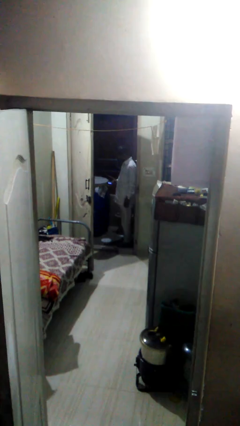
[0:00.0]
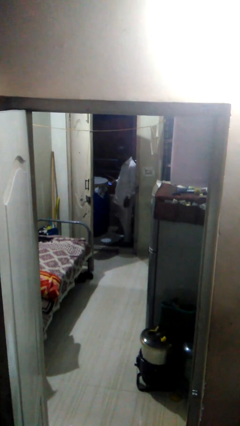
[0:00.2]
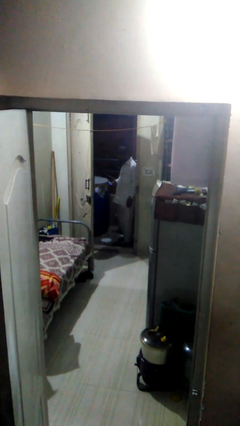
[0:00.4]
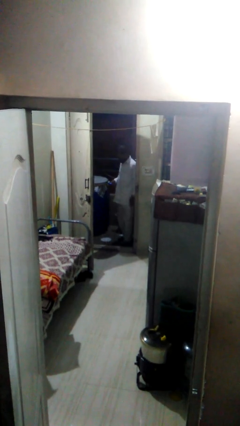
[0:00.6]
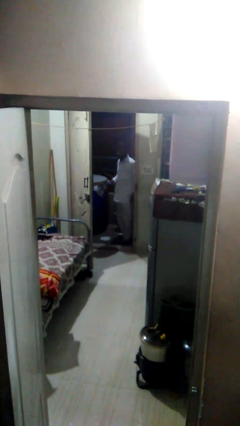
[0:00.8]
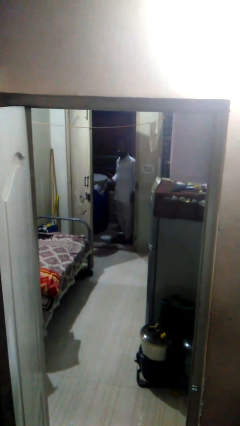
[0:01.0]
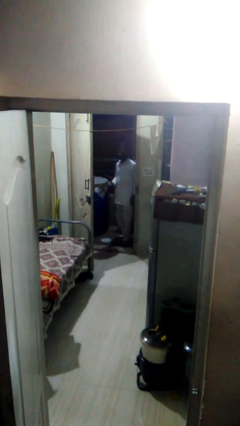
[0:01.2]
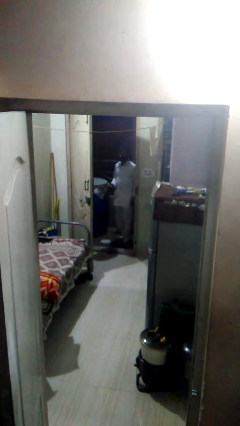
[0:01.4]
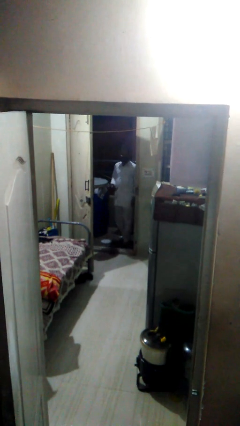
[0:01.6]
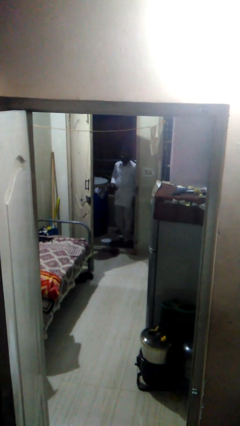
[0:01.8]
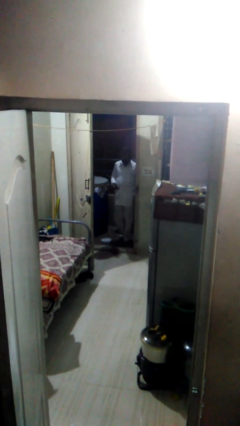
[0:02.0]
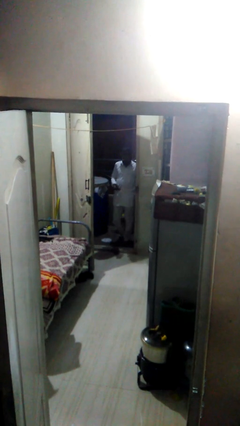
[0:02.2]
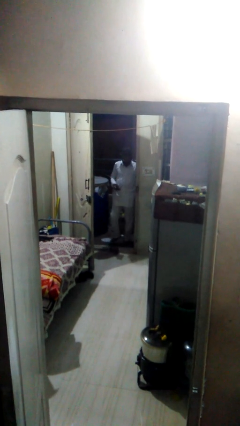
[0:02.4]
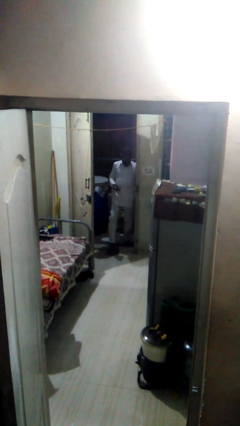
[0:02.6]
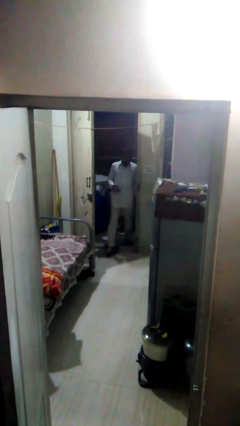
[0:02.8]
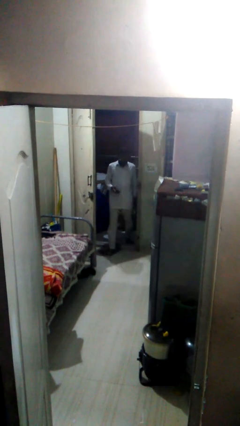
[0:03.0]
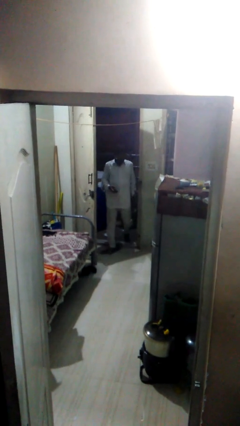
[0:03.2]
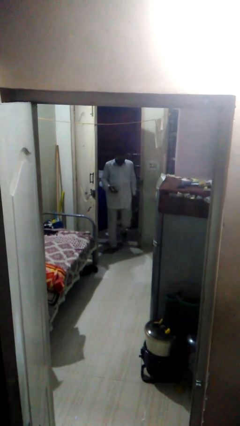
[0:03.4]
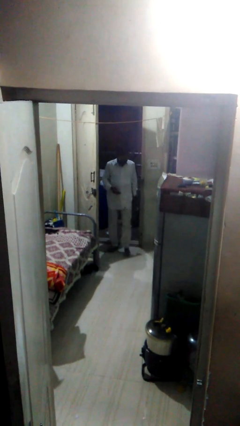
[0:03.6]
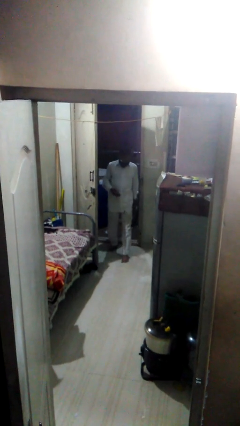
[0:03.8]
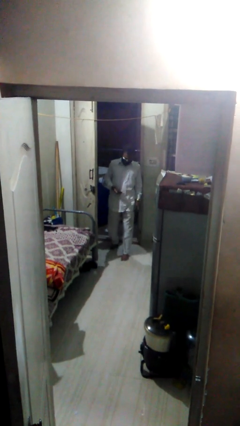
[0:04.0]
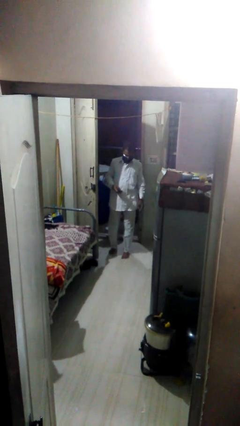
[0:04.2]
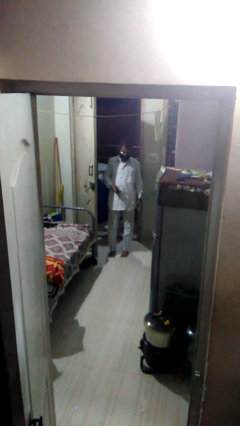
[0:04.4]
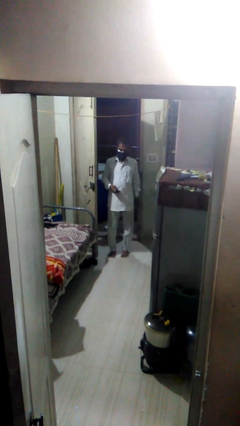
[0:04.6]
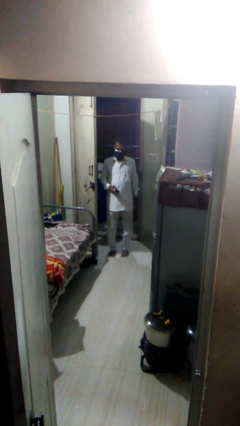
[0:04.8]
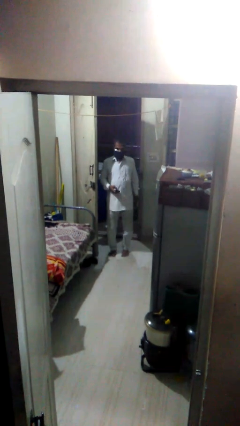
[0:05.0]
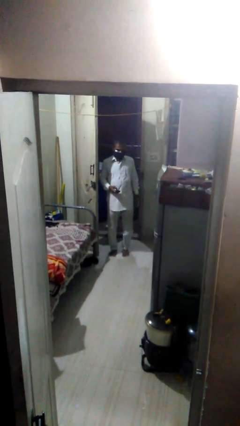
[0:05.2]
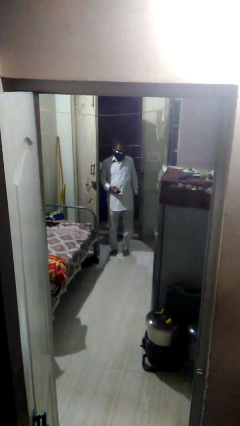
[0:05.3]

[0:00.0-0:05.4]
person enters scene through structure

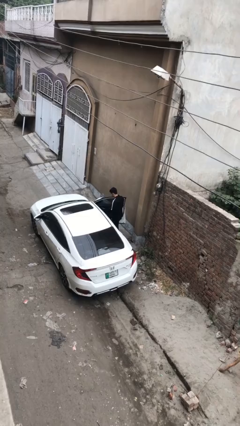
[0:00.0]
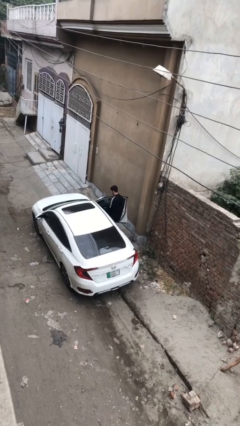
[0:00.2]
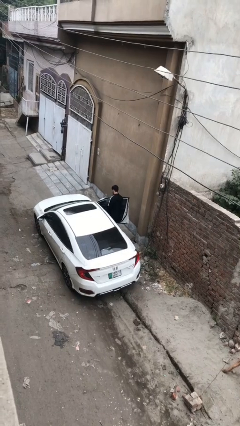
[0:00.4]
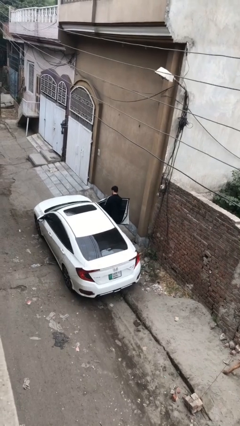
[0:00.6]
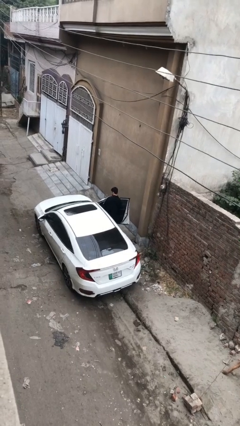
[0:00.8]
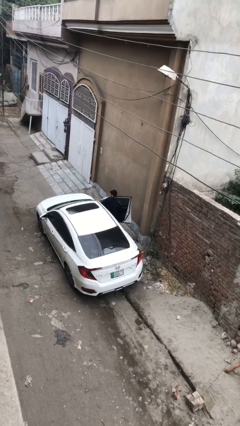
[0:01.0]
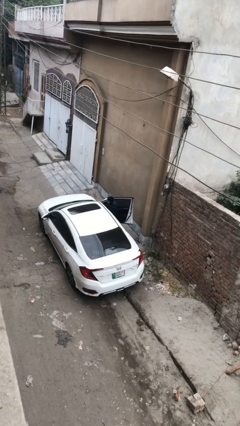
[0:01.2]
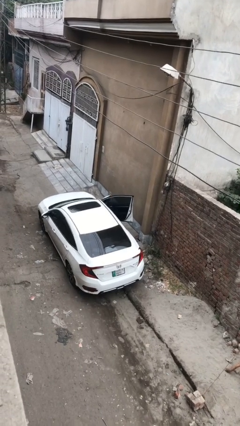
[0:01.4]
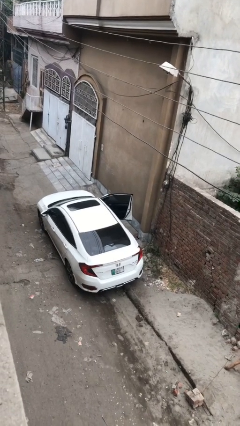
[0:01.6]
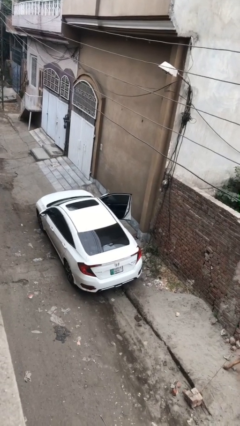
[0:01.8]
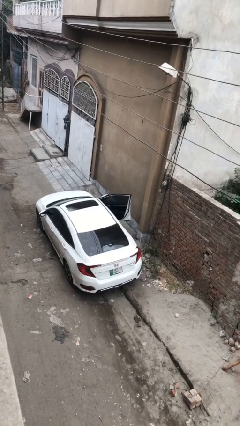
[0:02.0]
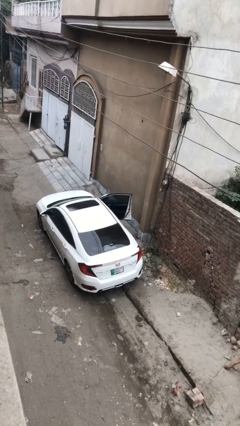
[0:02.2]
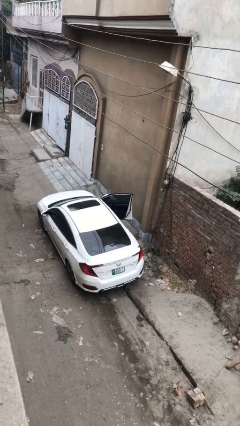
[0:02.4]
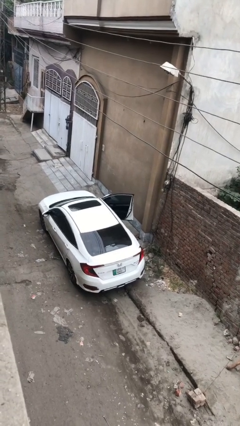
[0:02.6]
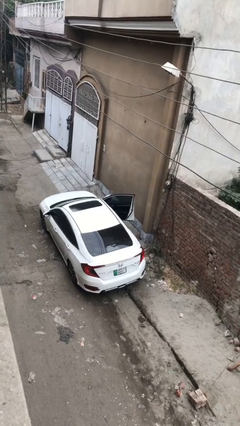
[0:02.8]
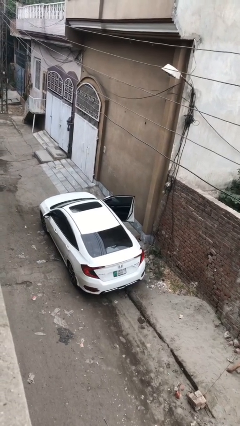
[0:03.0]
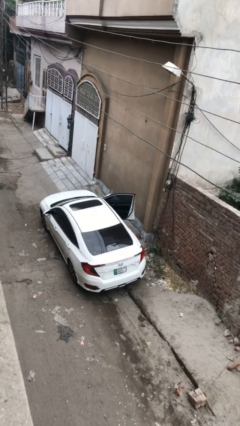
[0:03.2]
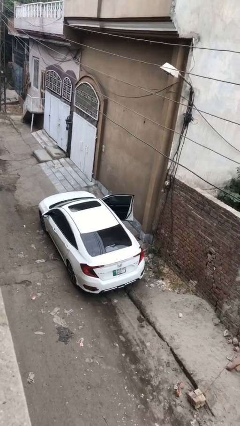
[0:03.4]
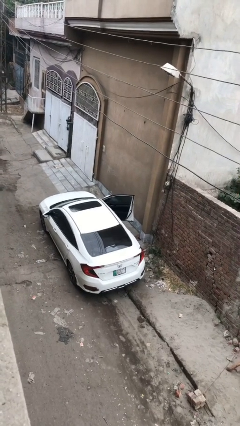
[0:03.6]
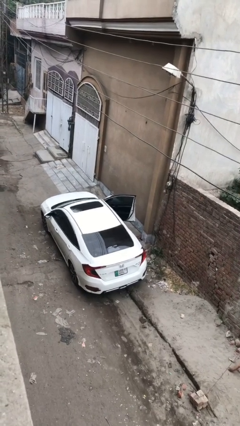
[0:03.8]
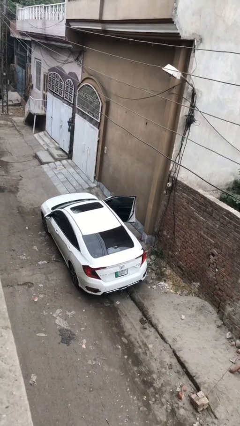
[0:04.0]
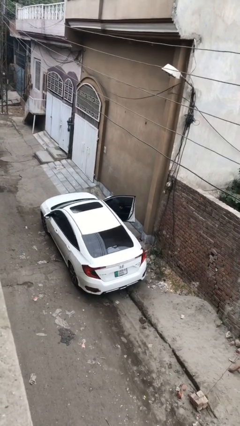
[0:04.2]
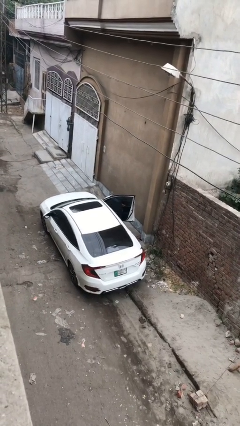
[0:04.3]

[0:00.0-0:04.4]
person enters car

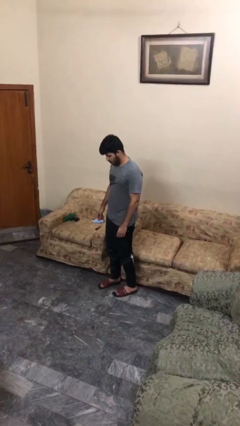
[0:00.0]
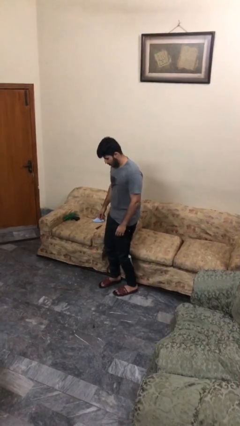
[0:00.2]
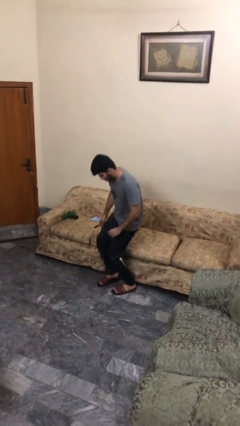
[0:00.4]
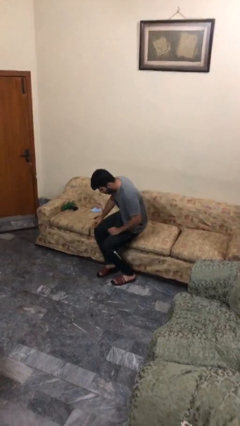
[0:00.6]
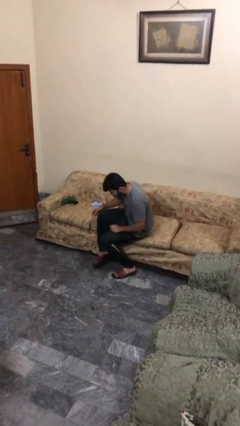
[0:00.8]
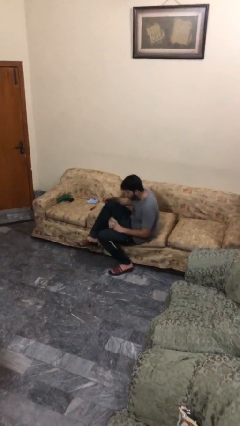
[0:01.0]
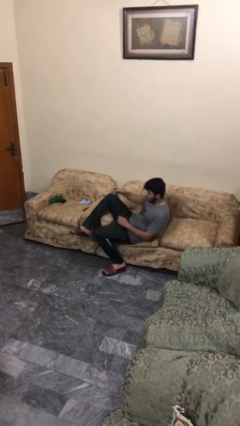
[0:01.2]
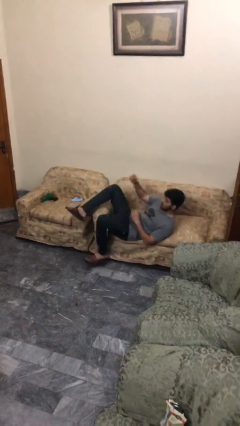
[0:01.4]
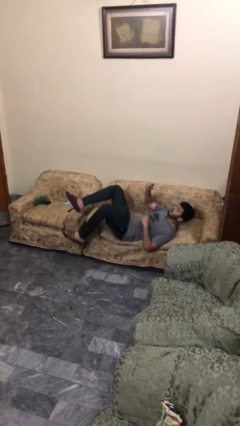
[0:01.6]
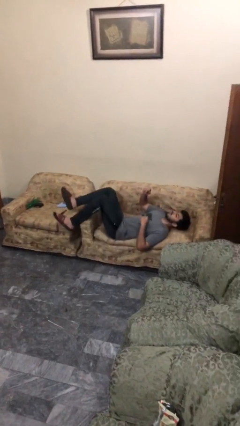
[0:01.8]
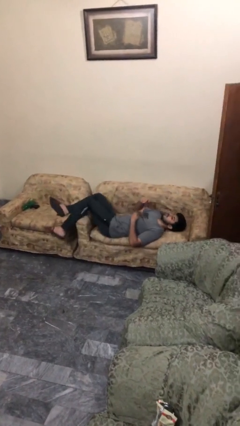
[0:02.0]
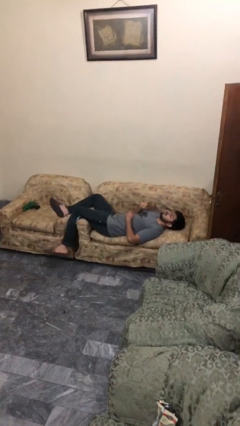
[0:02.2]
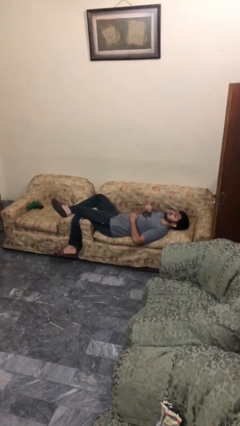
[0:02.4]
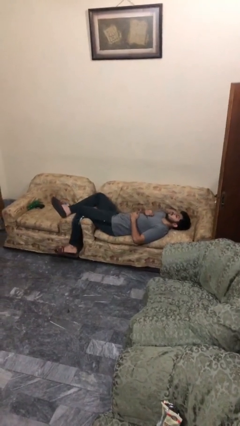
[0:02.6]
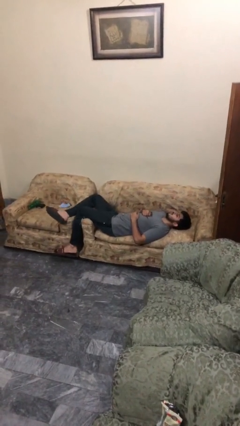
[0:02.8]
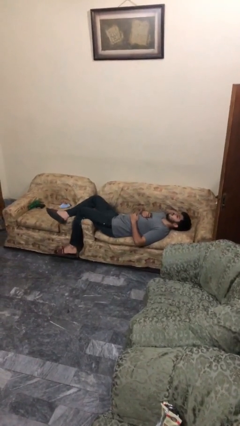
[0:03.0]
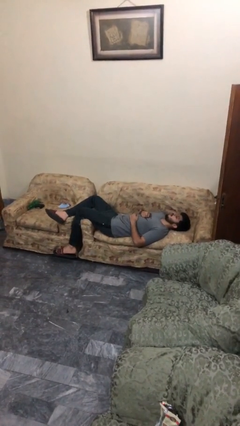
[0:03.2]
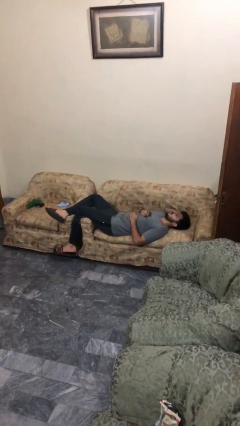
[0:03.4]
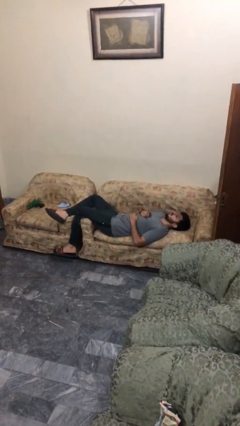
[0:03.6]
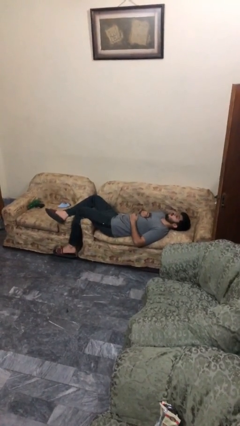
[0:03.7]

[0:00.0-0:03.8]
person lies down on couch

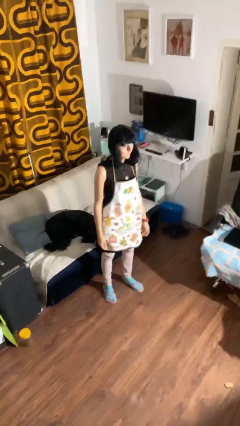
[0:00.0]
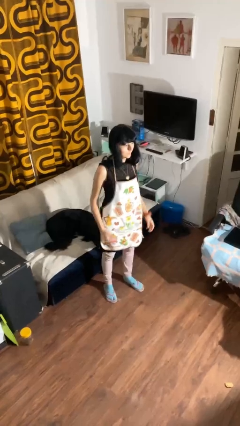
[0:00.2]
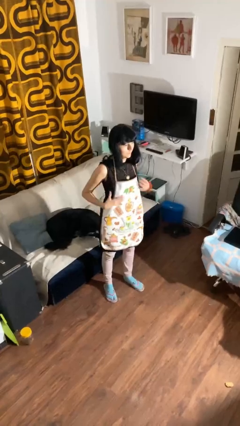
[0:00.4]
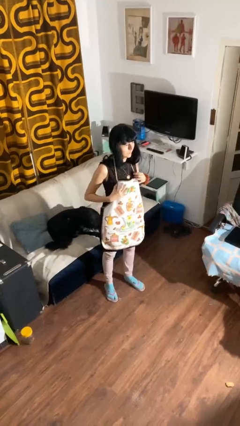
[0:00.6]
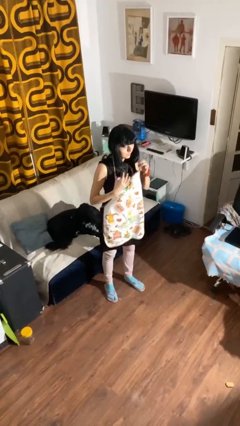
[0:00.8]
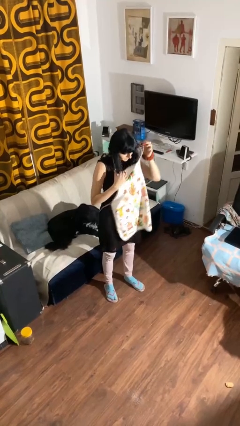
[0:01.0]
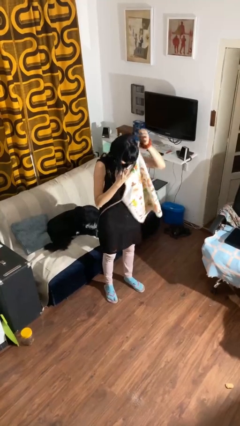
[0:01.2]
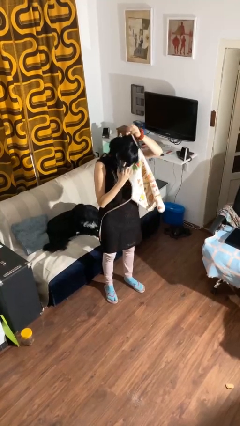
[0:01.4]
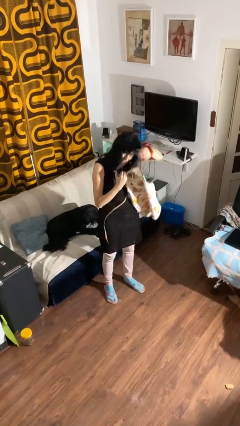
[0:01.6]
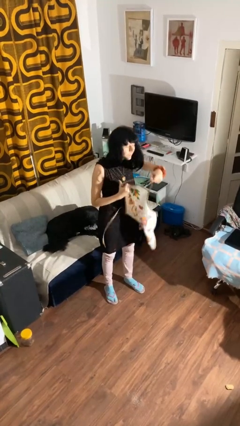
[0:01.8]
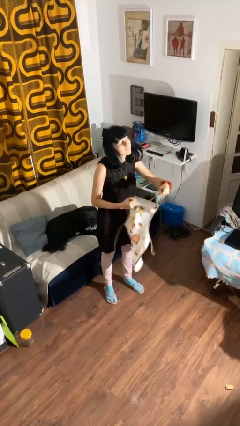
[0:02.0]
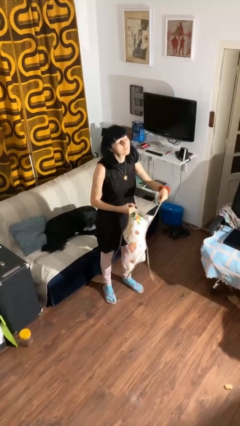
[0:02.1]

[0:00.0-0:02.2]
person takes off apron

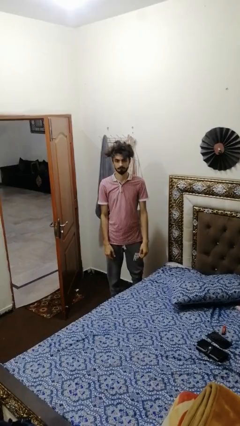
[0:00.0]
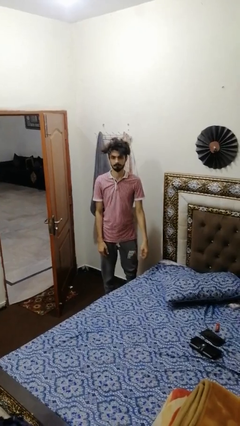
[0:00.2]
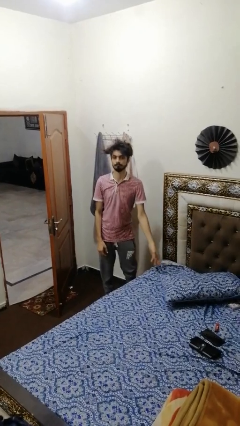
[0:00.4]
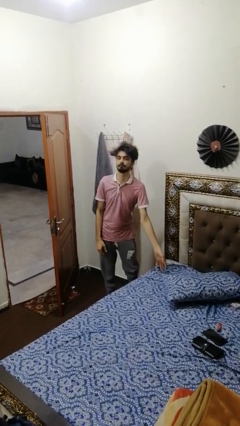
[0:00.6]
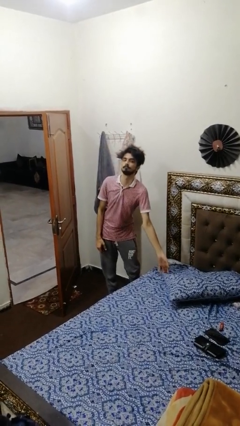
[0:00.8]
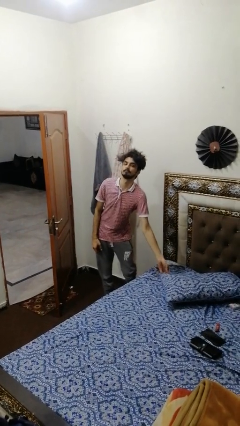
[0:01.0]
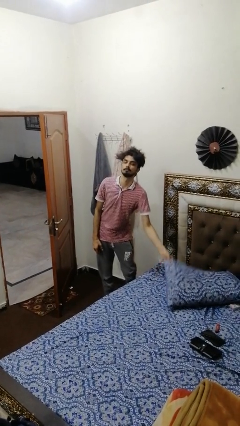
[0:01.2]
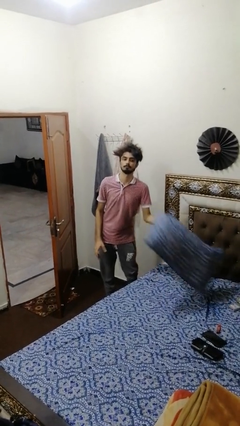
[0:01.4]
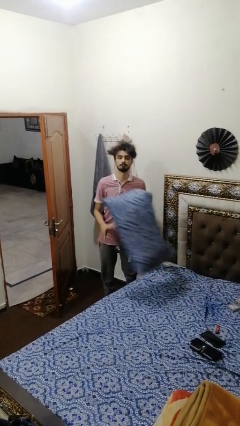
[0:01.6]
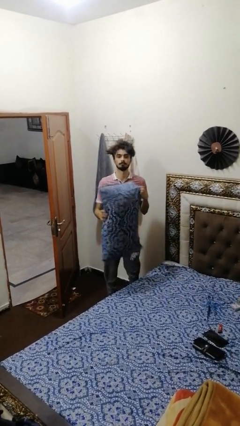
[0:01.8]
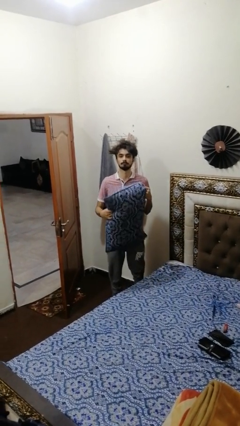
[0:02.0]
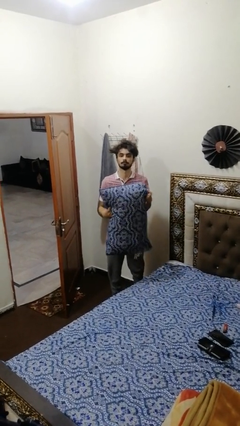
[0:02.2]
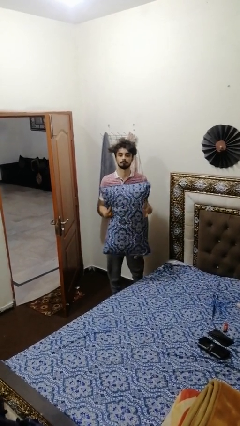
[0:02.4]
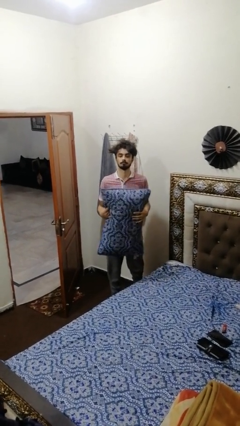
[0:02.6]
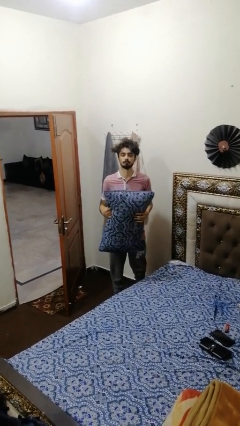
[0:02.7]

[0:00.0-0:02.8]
person picks up object from bed
